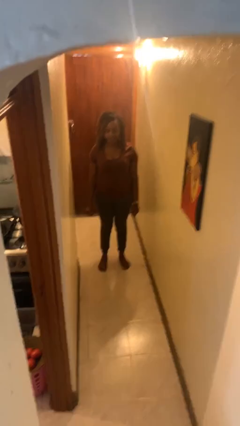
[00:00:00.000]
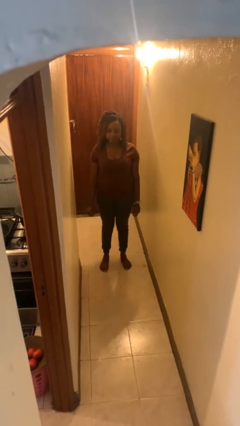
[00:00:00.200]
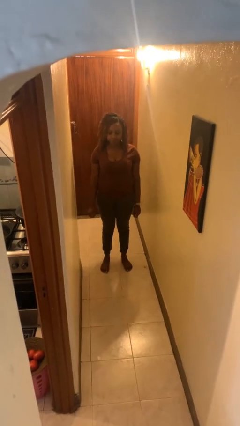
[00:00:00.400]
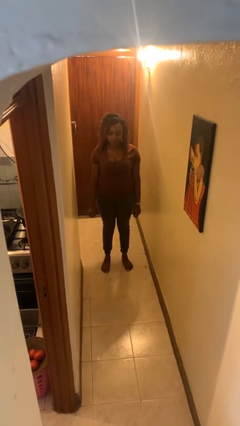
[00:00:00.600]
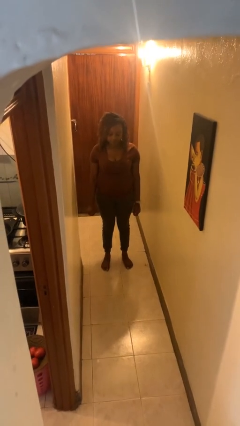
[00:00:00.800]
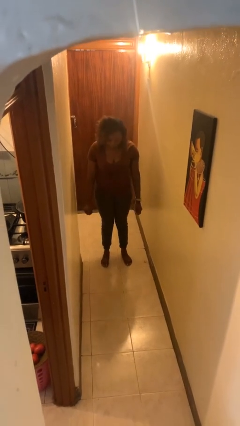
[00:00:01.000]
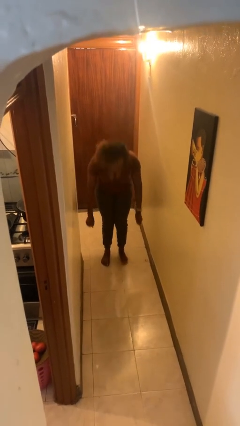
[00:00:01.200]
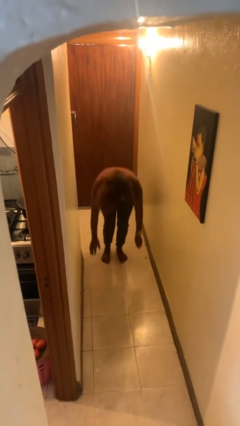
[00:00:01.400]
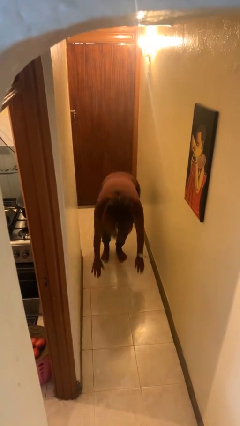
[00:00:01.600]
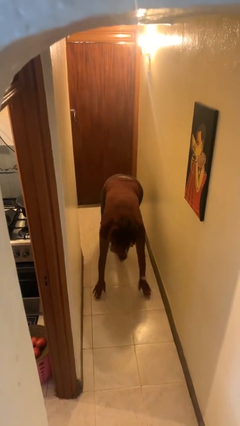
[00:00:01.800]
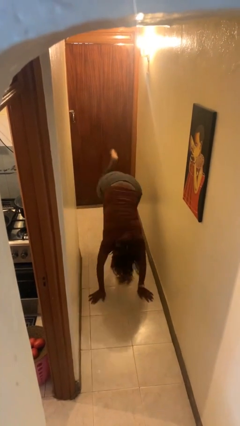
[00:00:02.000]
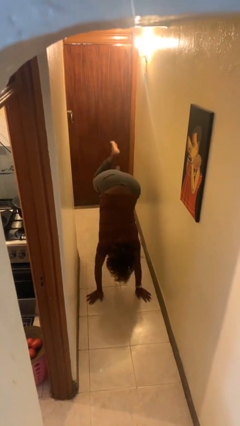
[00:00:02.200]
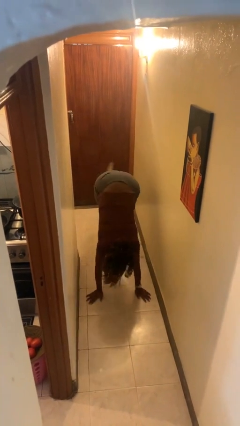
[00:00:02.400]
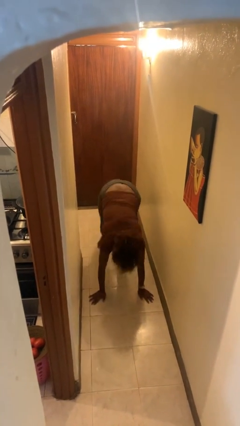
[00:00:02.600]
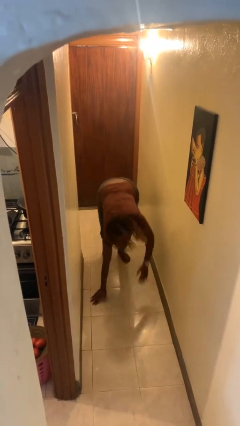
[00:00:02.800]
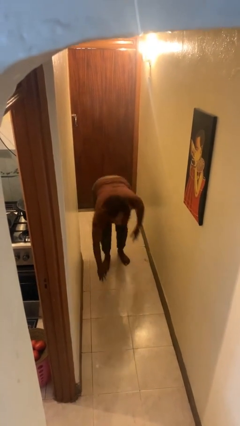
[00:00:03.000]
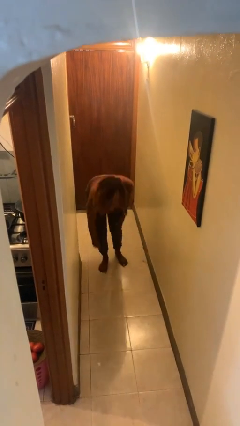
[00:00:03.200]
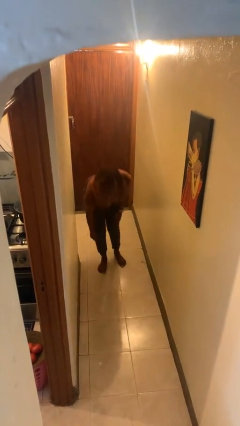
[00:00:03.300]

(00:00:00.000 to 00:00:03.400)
person handstand

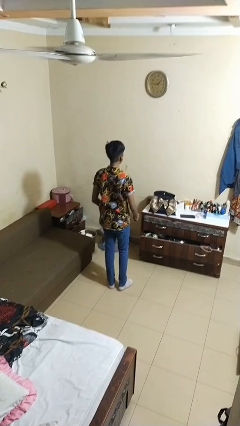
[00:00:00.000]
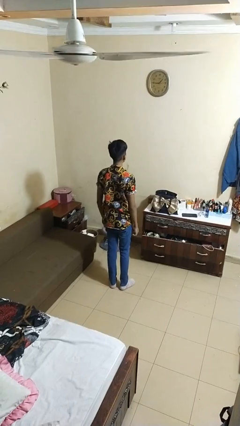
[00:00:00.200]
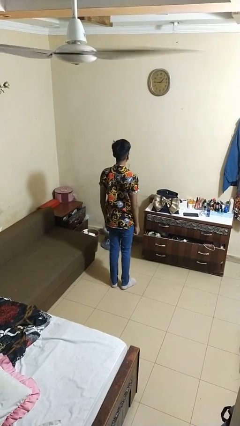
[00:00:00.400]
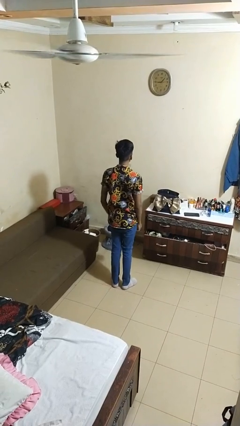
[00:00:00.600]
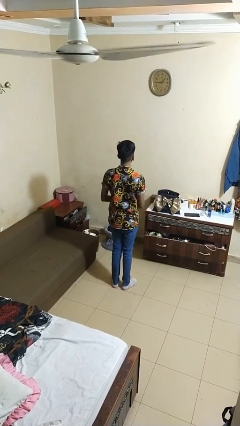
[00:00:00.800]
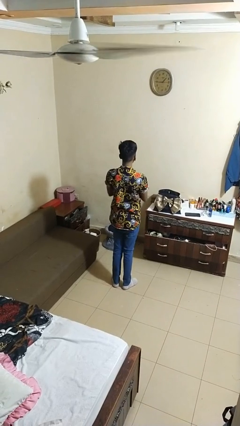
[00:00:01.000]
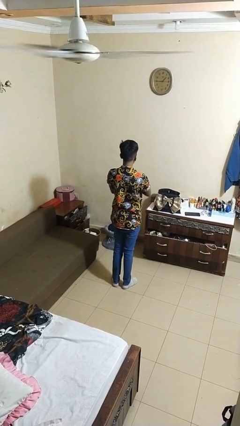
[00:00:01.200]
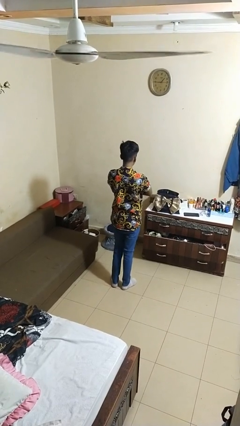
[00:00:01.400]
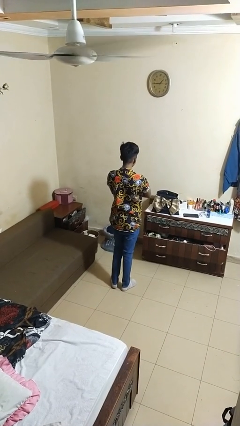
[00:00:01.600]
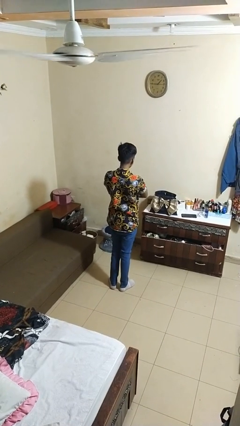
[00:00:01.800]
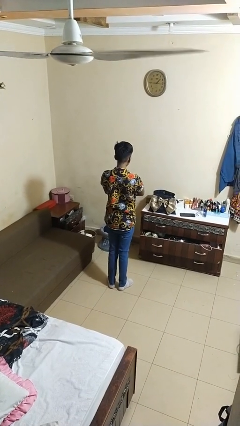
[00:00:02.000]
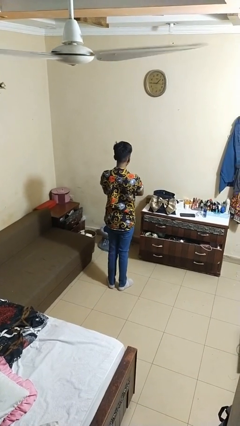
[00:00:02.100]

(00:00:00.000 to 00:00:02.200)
person crosses arms

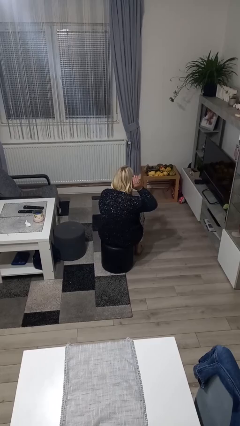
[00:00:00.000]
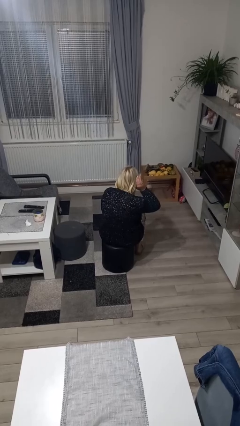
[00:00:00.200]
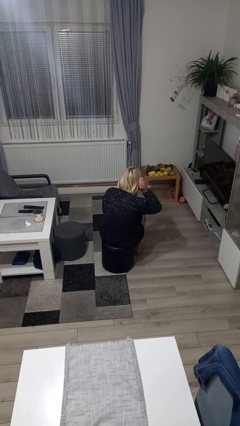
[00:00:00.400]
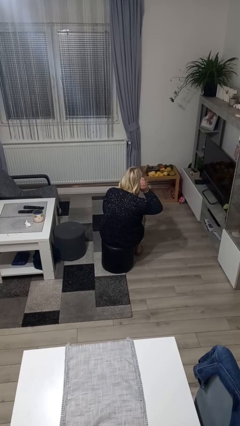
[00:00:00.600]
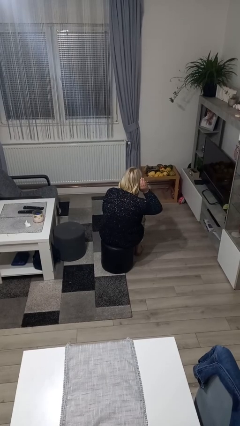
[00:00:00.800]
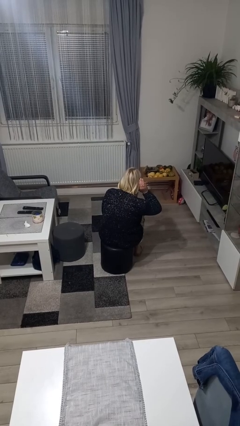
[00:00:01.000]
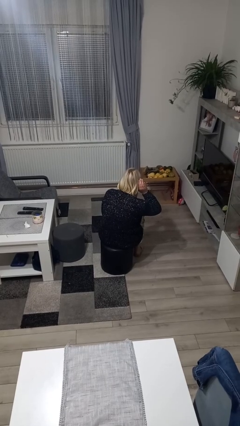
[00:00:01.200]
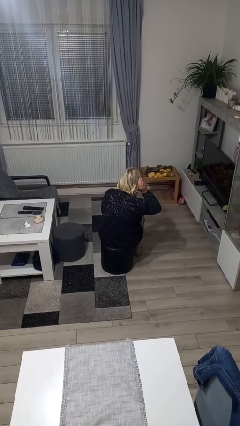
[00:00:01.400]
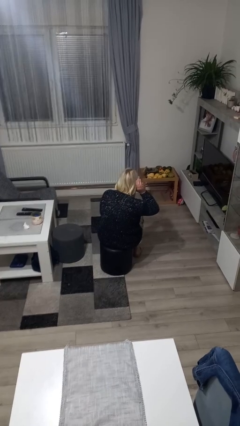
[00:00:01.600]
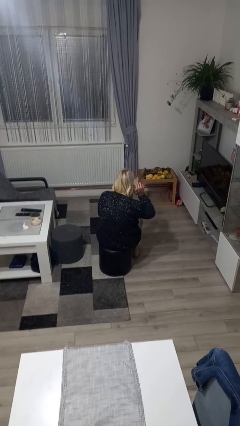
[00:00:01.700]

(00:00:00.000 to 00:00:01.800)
person gestures listen closely

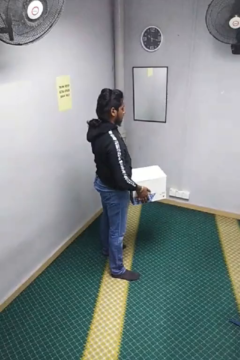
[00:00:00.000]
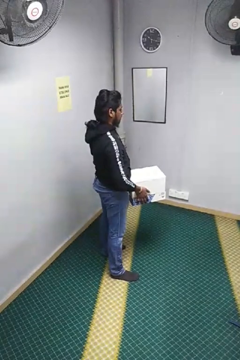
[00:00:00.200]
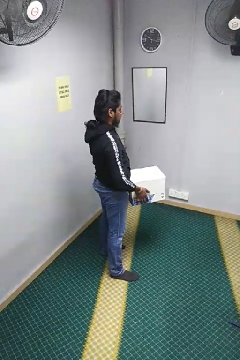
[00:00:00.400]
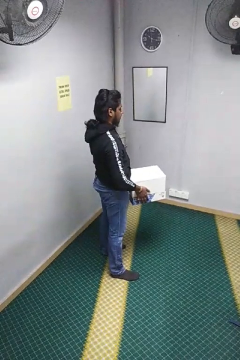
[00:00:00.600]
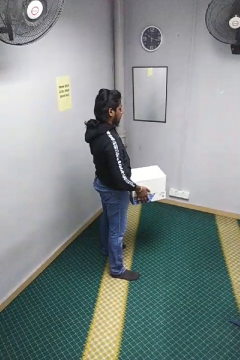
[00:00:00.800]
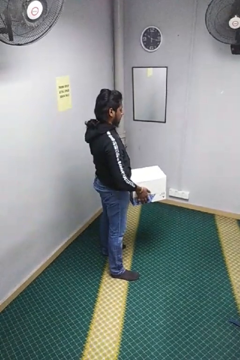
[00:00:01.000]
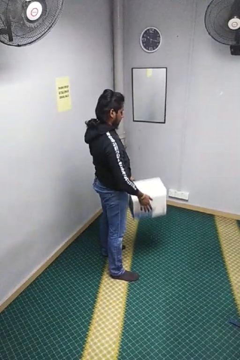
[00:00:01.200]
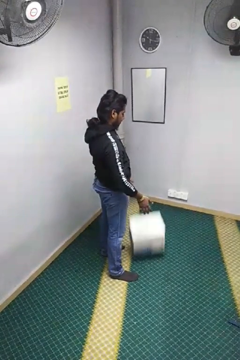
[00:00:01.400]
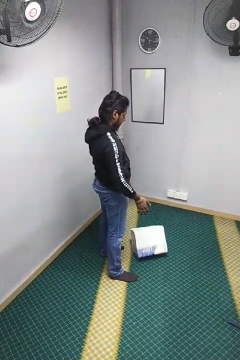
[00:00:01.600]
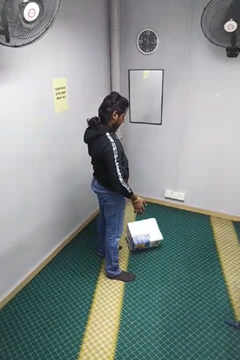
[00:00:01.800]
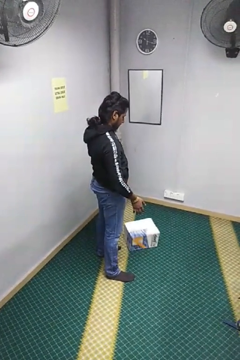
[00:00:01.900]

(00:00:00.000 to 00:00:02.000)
person drops object

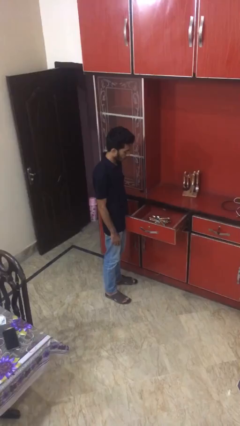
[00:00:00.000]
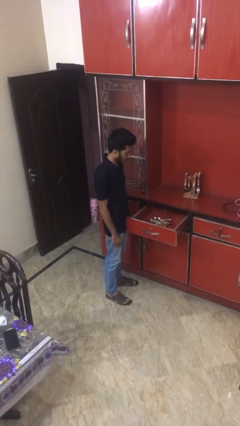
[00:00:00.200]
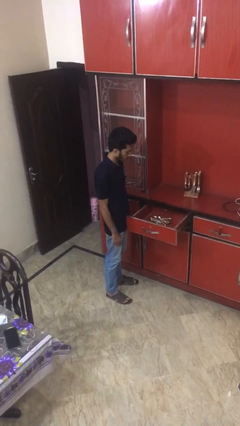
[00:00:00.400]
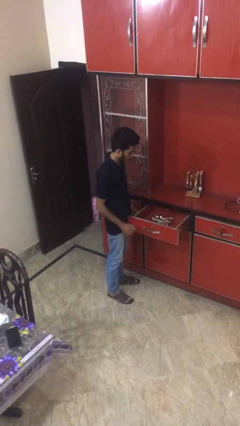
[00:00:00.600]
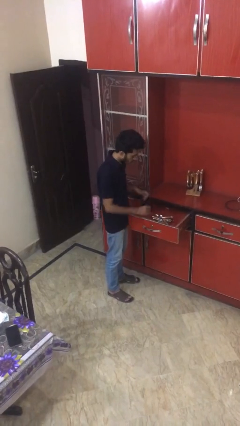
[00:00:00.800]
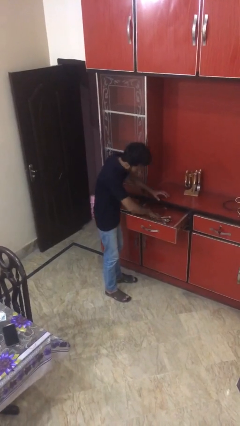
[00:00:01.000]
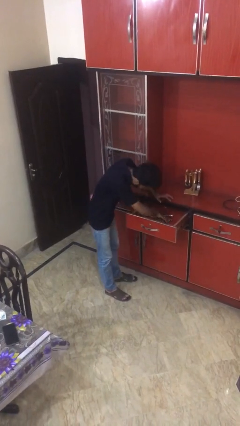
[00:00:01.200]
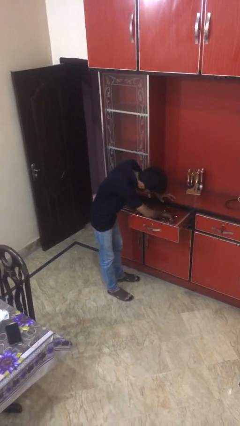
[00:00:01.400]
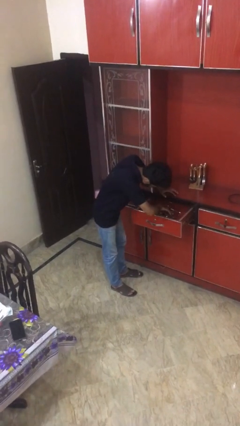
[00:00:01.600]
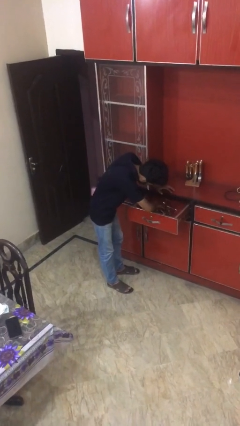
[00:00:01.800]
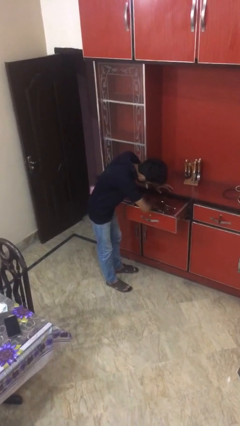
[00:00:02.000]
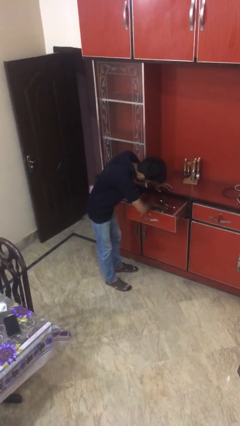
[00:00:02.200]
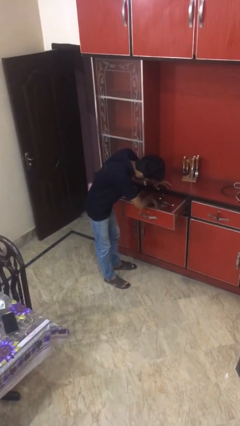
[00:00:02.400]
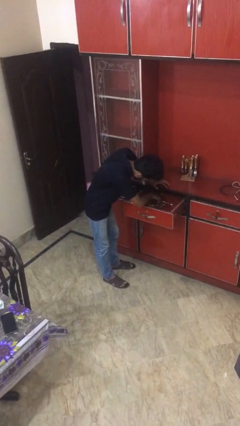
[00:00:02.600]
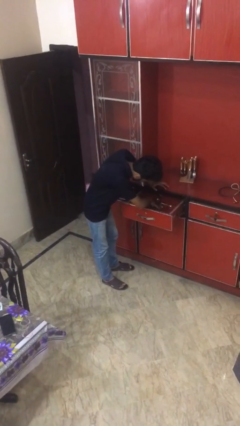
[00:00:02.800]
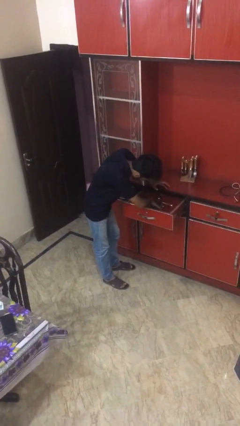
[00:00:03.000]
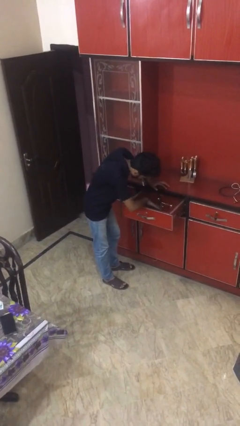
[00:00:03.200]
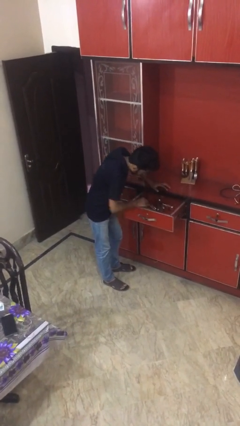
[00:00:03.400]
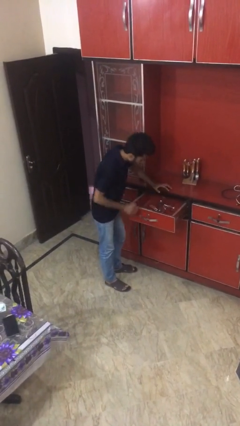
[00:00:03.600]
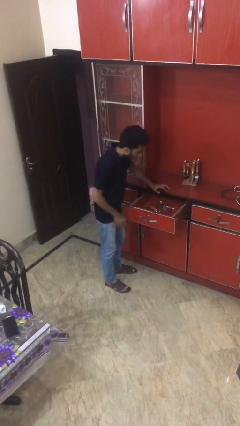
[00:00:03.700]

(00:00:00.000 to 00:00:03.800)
person searches in kitchen drawer

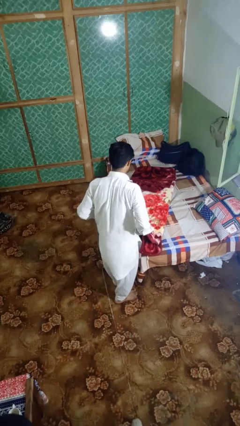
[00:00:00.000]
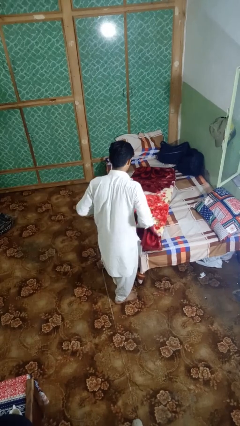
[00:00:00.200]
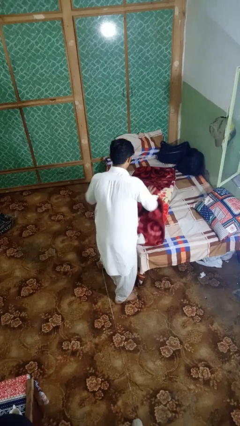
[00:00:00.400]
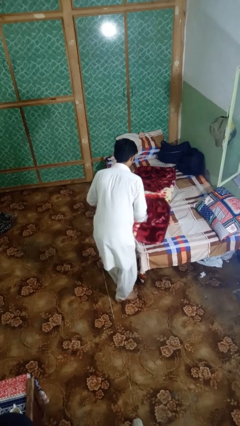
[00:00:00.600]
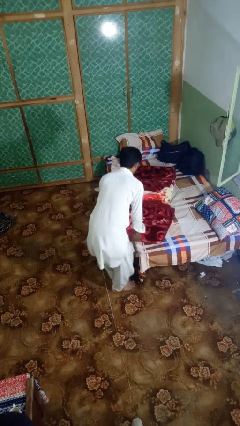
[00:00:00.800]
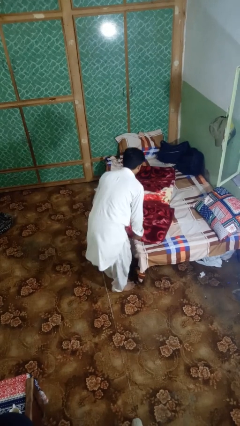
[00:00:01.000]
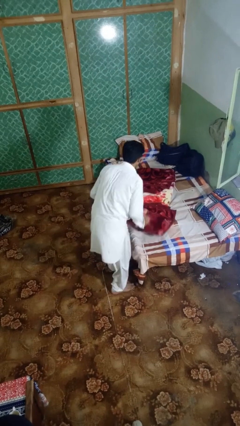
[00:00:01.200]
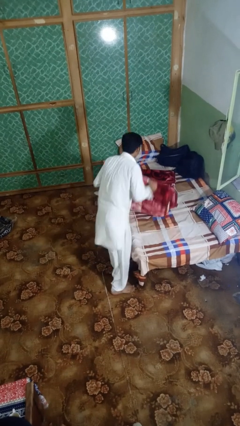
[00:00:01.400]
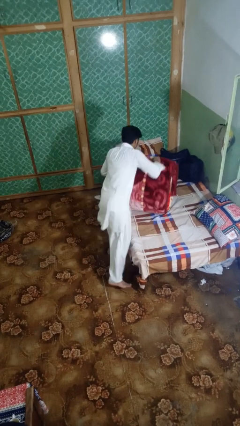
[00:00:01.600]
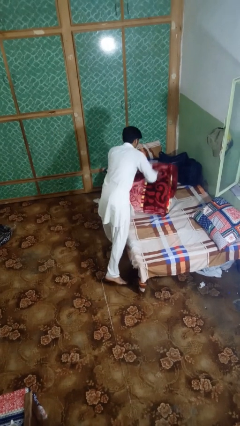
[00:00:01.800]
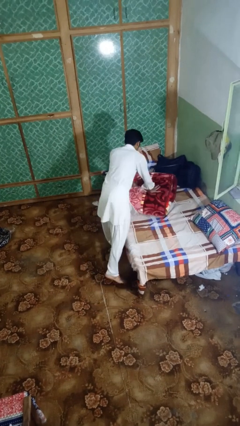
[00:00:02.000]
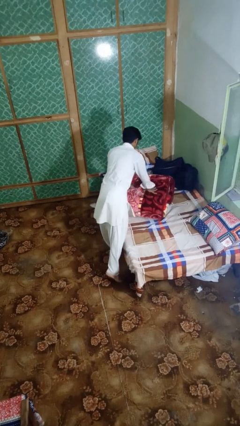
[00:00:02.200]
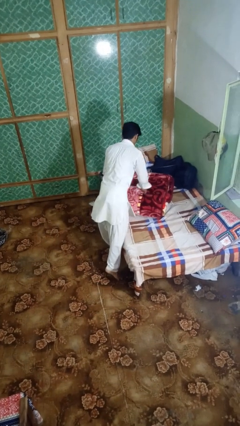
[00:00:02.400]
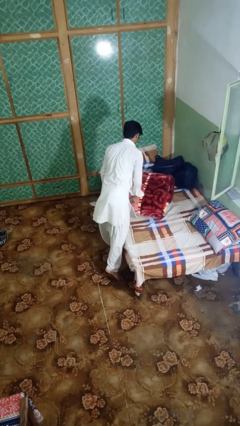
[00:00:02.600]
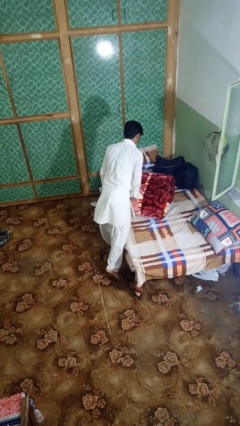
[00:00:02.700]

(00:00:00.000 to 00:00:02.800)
person folds blanket

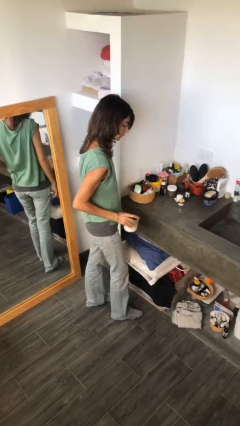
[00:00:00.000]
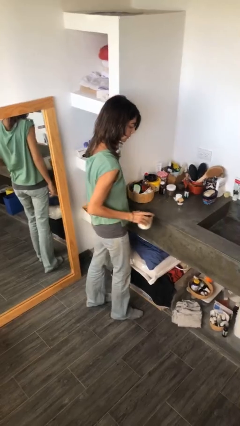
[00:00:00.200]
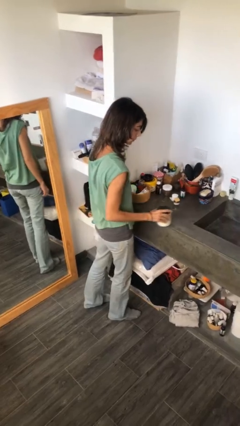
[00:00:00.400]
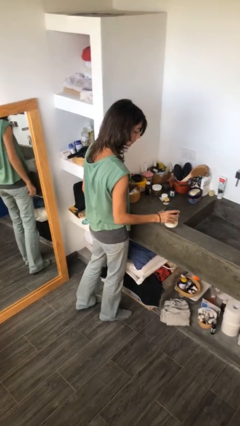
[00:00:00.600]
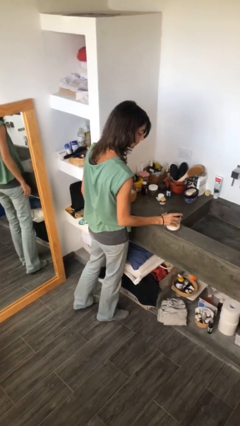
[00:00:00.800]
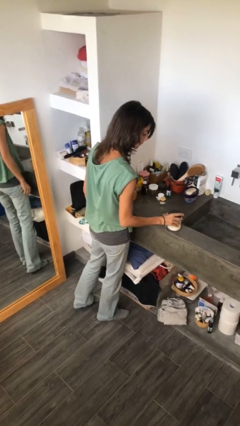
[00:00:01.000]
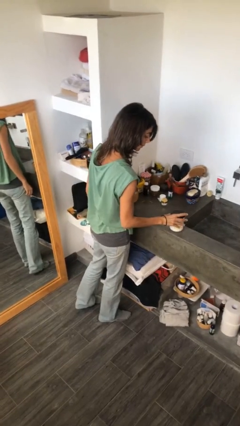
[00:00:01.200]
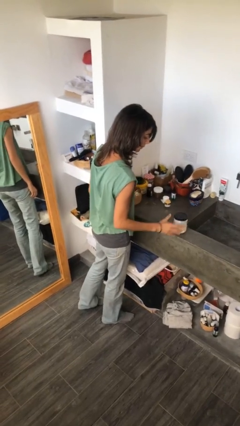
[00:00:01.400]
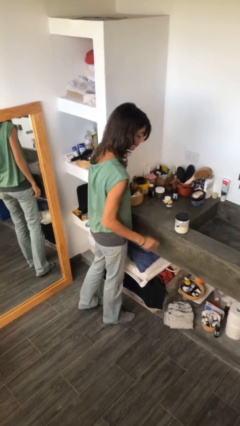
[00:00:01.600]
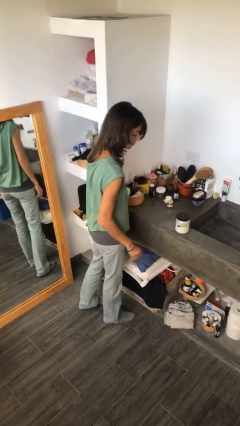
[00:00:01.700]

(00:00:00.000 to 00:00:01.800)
person puts down object on countertop
